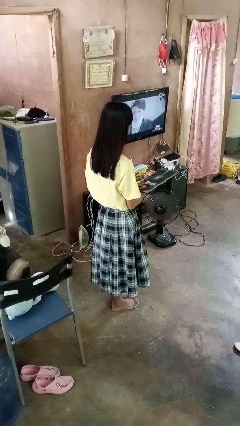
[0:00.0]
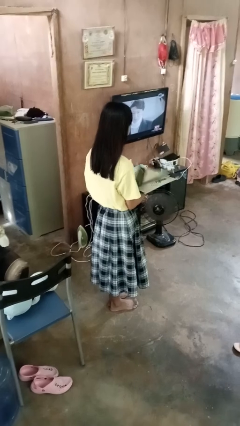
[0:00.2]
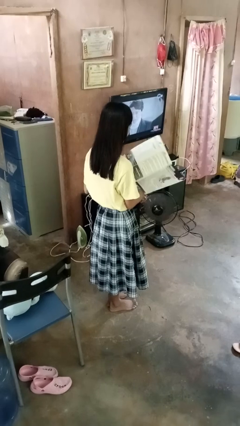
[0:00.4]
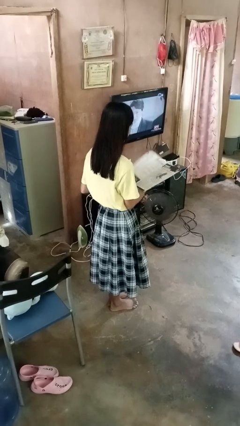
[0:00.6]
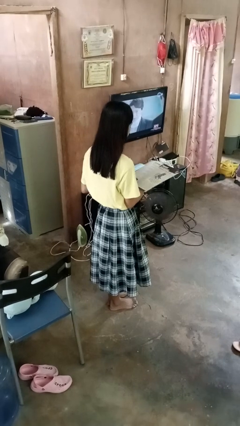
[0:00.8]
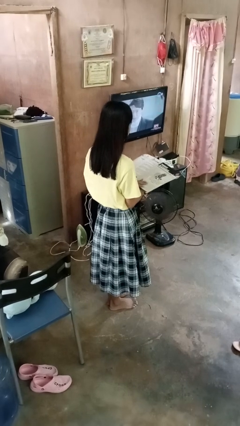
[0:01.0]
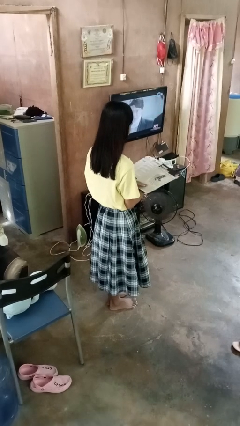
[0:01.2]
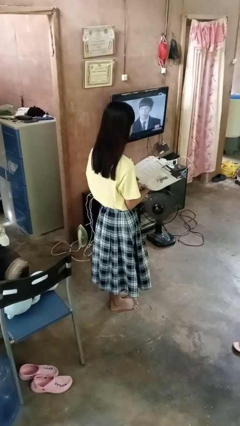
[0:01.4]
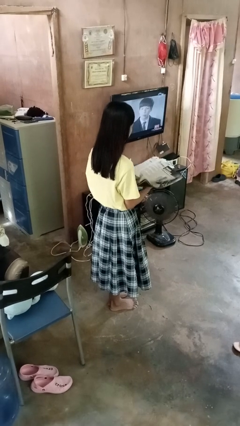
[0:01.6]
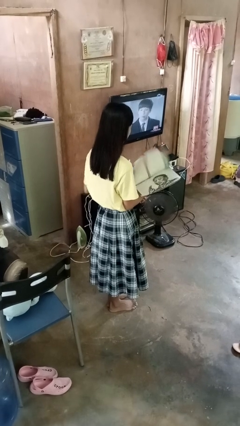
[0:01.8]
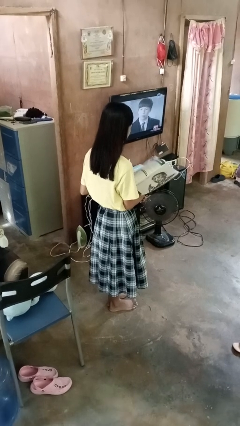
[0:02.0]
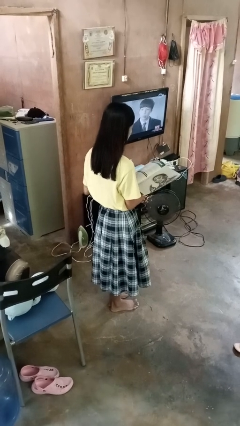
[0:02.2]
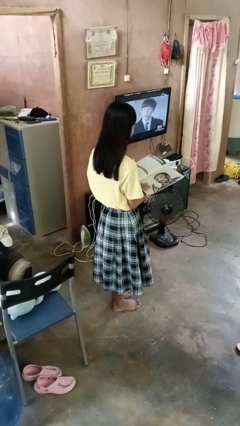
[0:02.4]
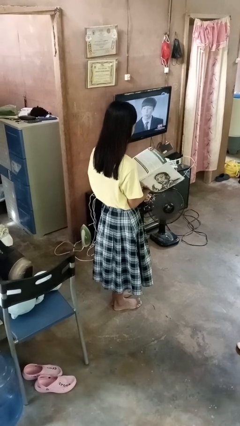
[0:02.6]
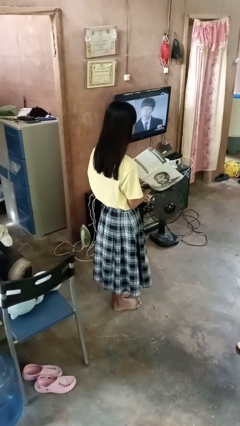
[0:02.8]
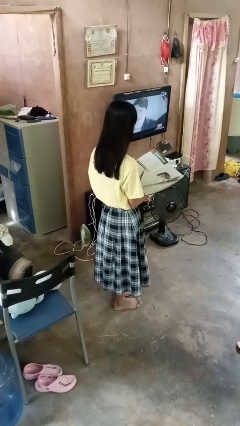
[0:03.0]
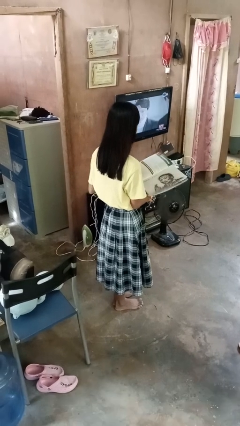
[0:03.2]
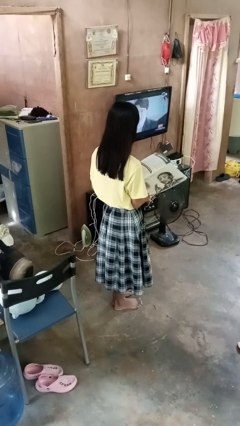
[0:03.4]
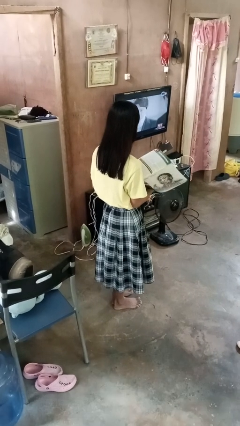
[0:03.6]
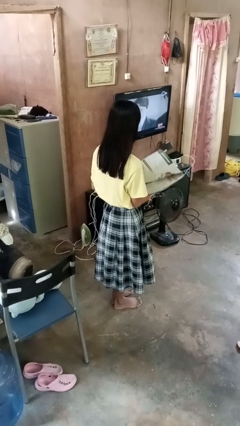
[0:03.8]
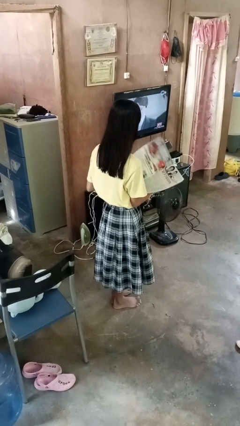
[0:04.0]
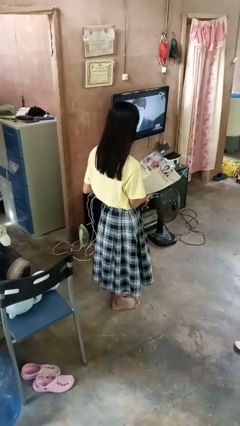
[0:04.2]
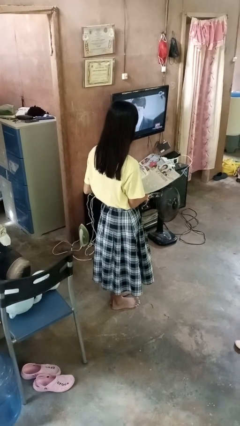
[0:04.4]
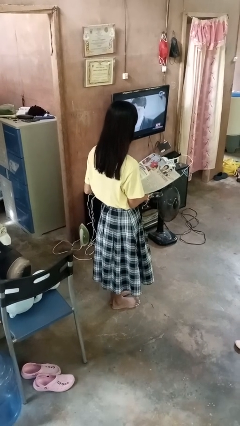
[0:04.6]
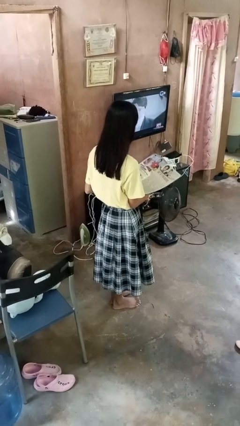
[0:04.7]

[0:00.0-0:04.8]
person reads magazine

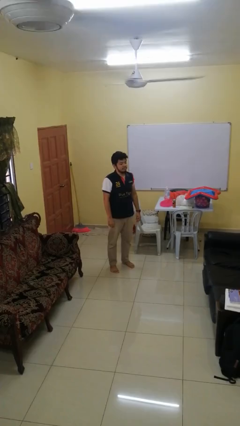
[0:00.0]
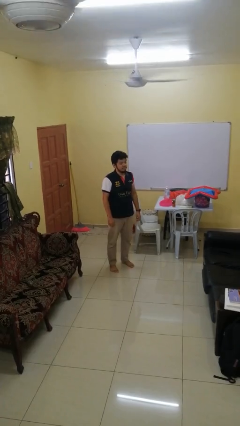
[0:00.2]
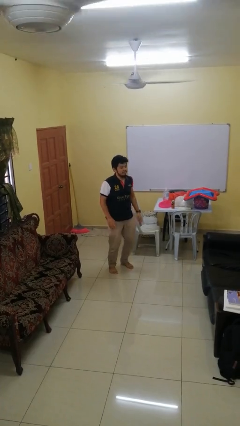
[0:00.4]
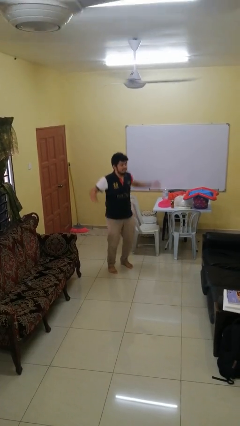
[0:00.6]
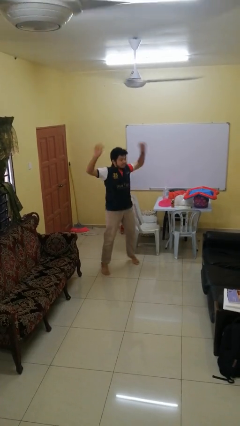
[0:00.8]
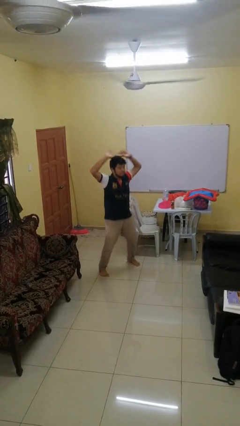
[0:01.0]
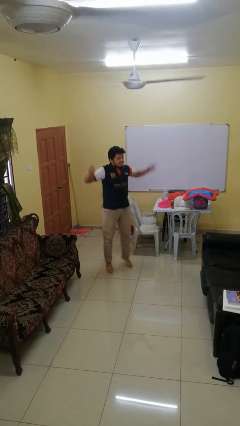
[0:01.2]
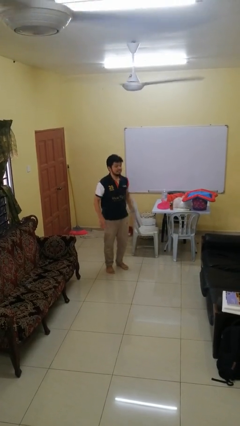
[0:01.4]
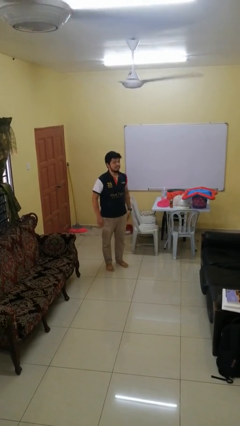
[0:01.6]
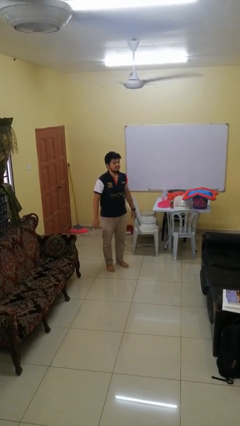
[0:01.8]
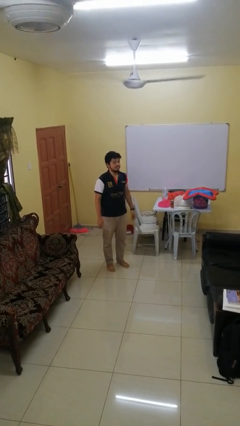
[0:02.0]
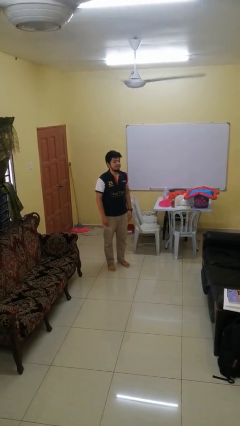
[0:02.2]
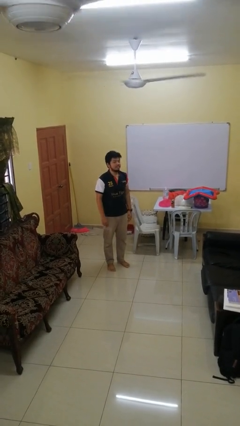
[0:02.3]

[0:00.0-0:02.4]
person exercises with jumping jacks

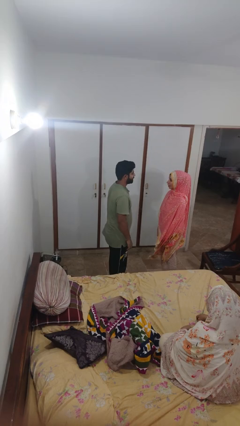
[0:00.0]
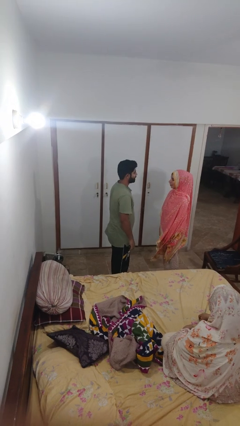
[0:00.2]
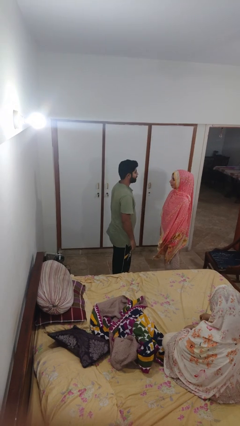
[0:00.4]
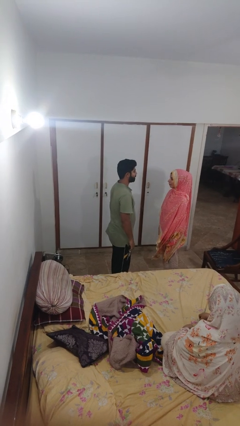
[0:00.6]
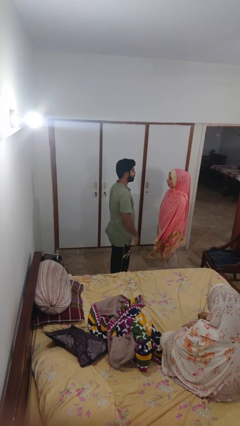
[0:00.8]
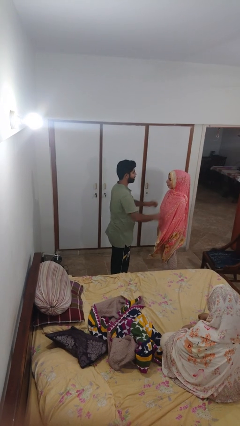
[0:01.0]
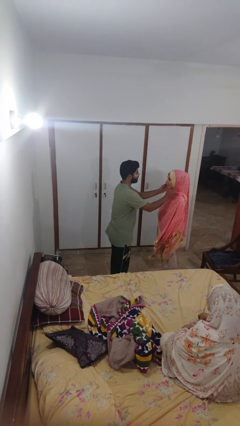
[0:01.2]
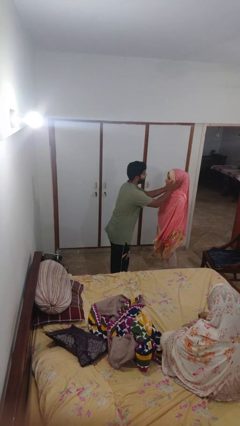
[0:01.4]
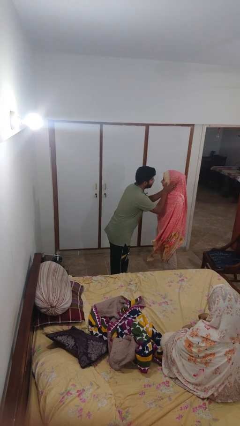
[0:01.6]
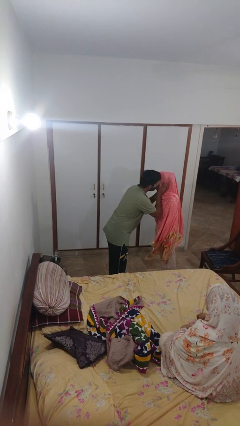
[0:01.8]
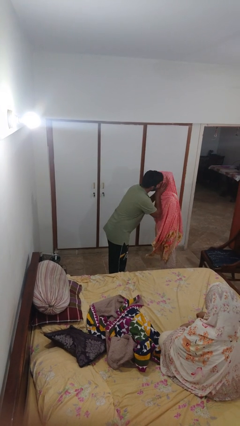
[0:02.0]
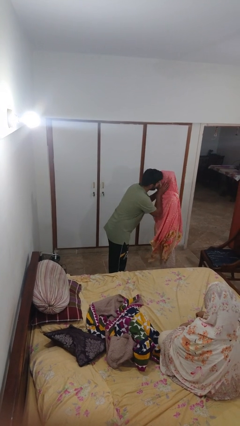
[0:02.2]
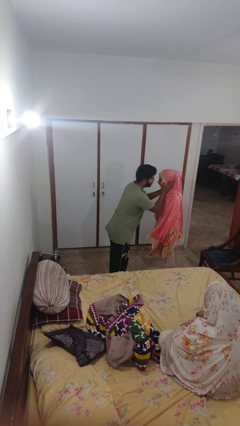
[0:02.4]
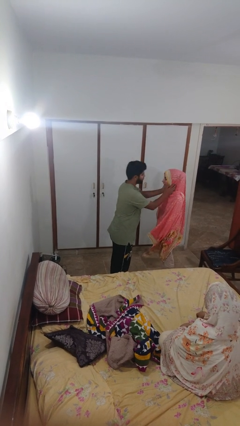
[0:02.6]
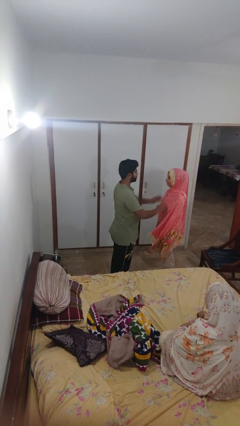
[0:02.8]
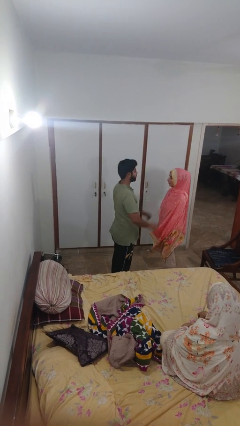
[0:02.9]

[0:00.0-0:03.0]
person kisses cheek of person

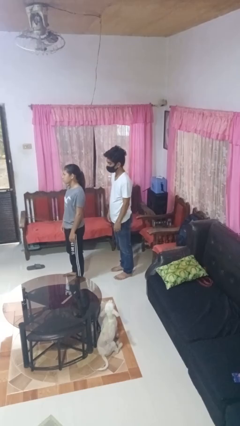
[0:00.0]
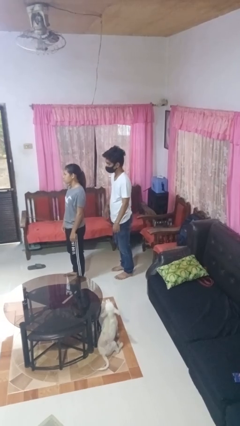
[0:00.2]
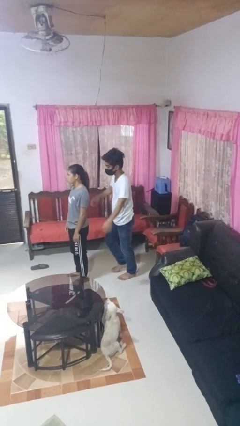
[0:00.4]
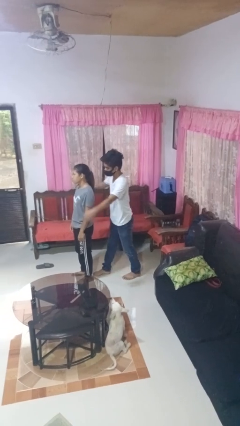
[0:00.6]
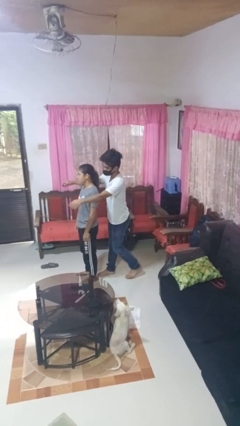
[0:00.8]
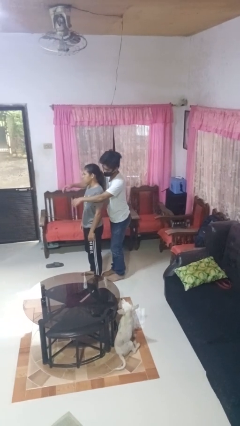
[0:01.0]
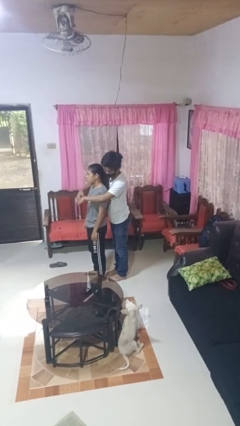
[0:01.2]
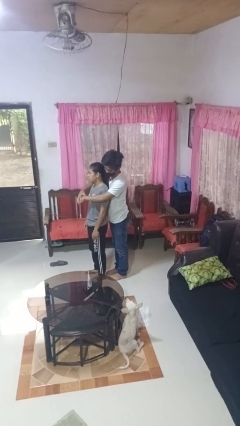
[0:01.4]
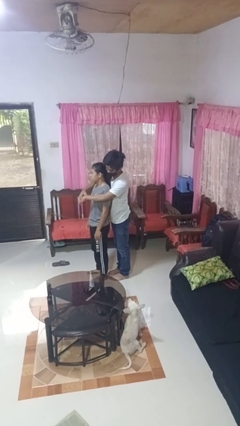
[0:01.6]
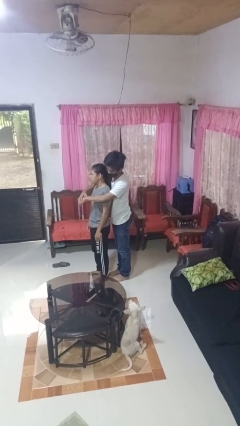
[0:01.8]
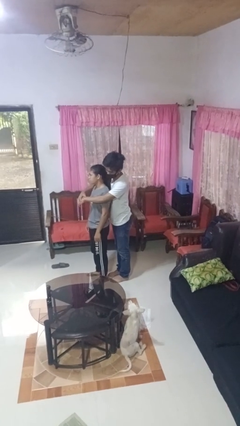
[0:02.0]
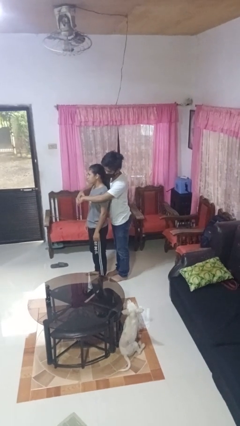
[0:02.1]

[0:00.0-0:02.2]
person hugs person from behind

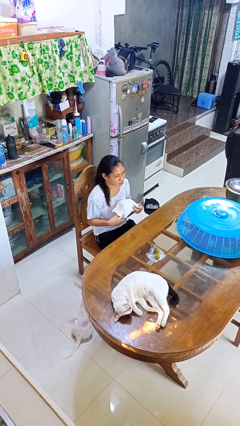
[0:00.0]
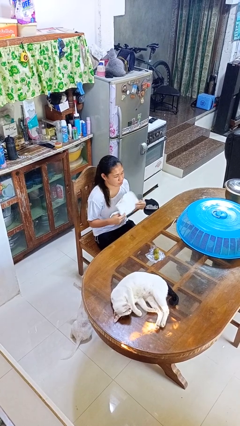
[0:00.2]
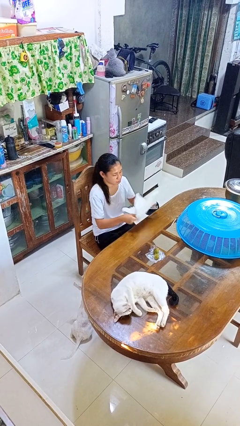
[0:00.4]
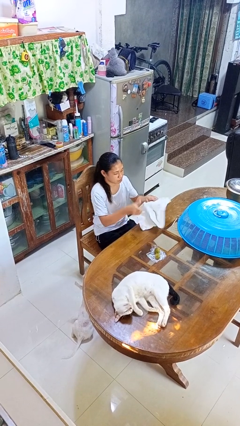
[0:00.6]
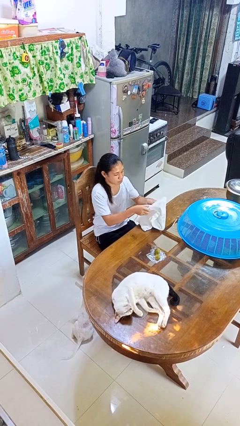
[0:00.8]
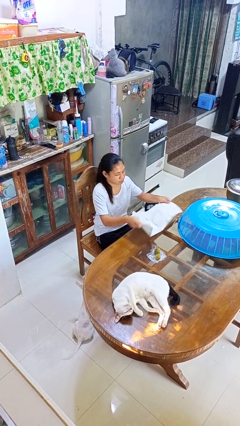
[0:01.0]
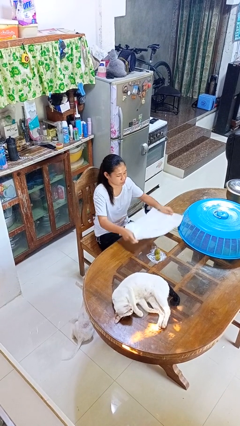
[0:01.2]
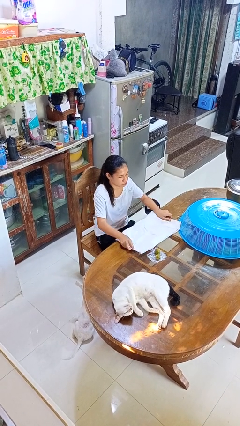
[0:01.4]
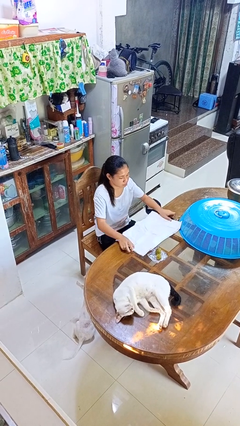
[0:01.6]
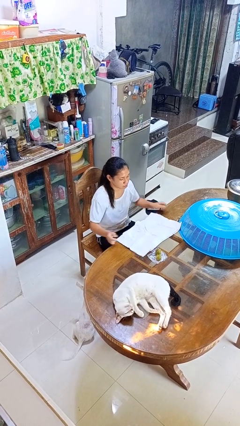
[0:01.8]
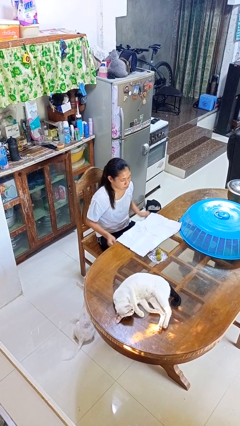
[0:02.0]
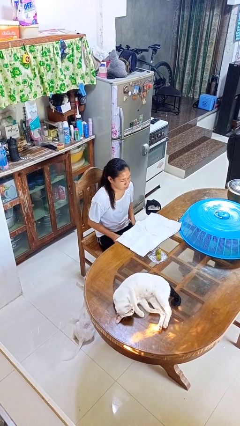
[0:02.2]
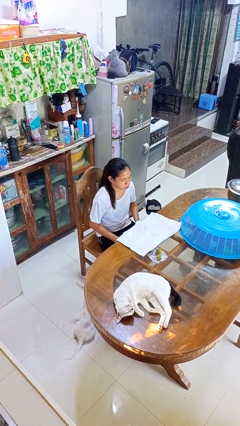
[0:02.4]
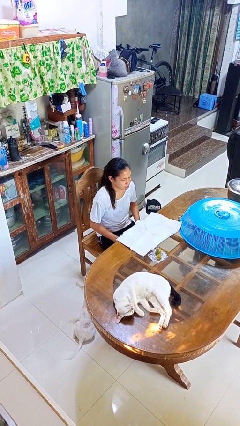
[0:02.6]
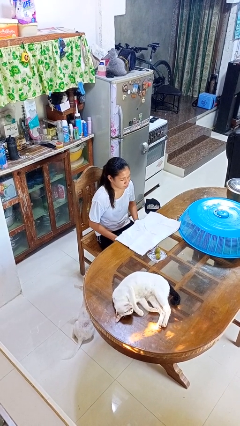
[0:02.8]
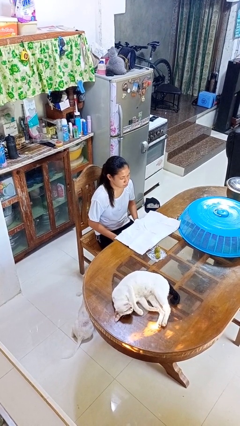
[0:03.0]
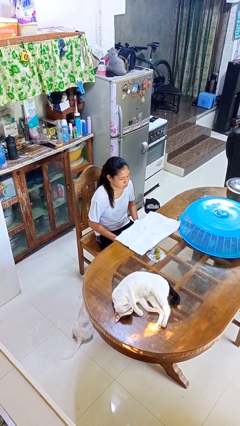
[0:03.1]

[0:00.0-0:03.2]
person spreads tablecloth

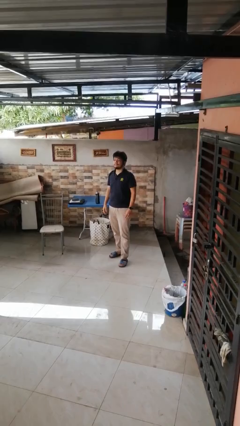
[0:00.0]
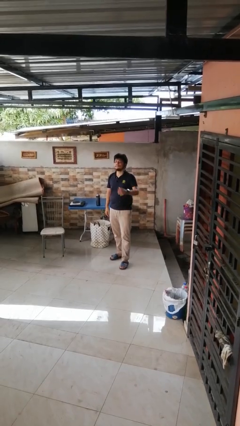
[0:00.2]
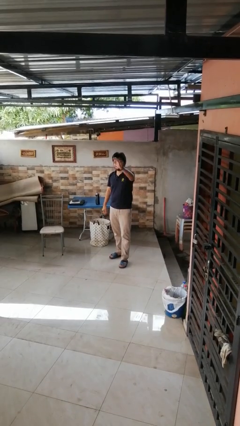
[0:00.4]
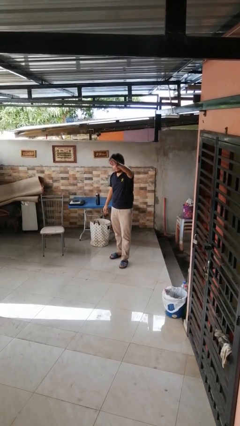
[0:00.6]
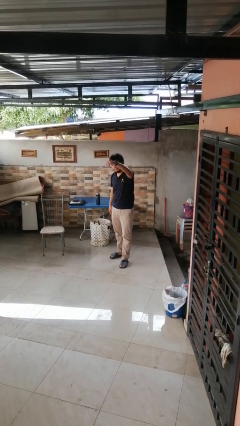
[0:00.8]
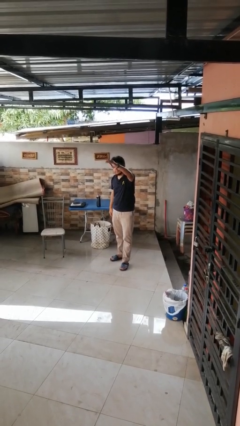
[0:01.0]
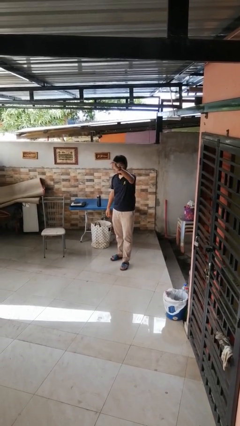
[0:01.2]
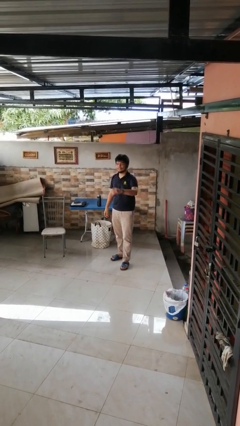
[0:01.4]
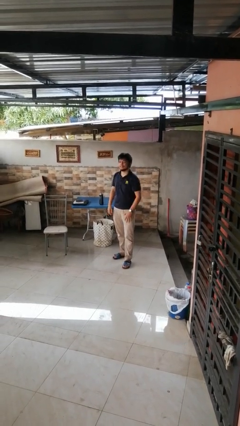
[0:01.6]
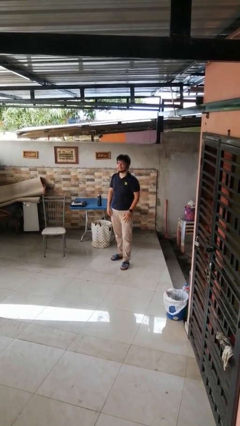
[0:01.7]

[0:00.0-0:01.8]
person gestures come here

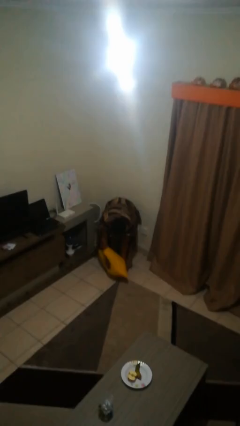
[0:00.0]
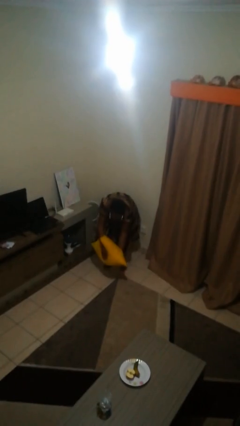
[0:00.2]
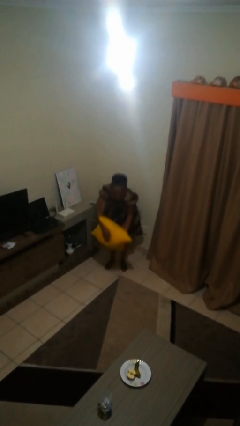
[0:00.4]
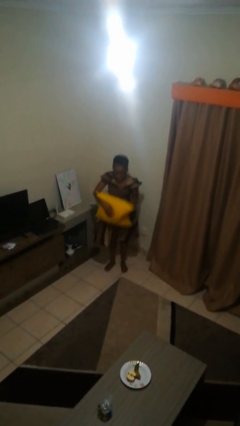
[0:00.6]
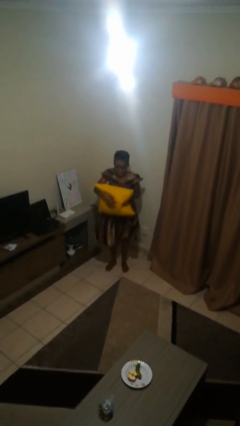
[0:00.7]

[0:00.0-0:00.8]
person catches dropped object
